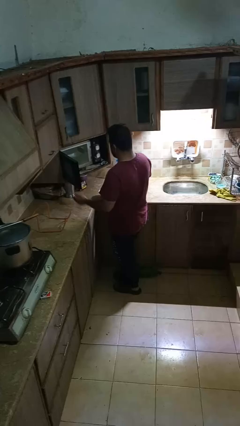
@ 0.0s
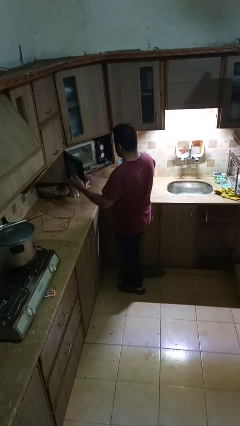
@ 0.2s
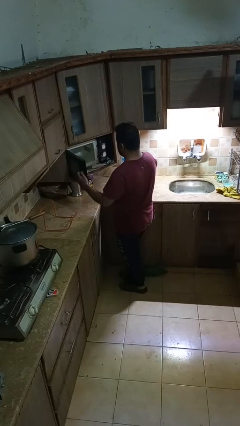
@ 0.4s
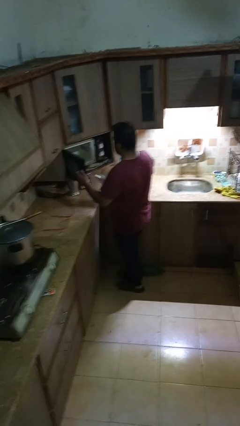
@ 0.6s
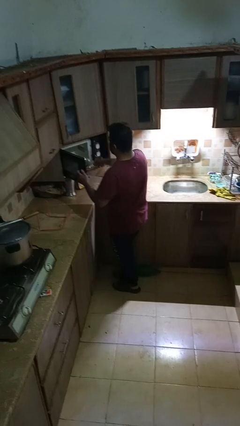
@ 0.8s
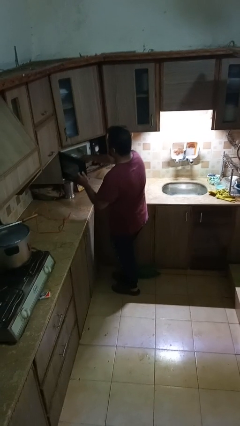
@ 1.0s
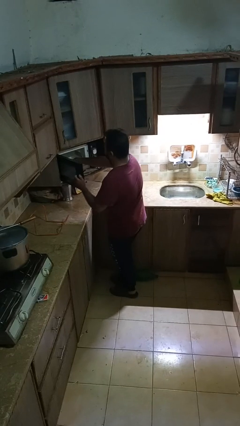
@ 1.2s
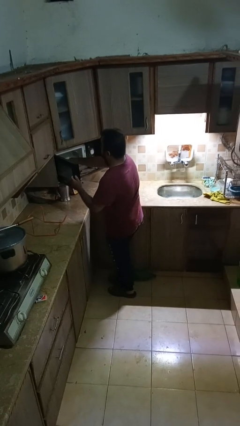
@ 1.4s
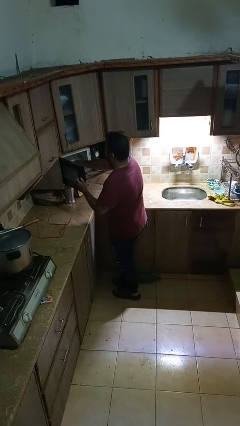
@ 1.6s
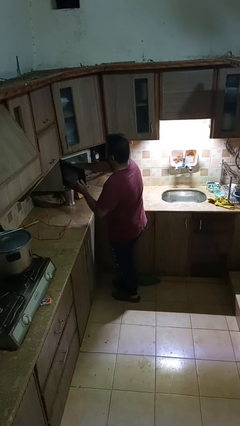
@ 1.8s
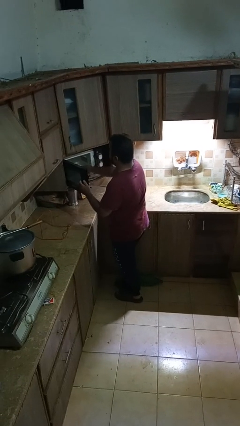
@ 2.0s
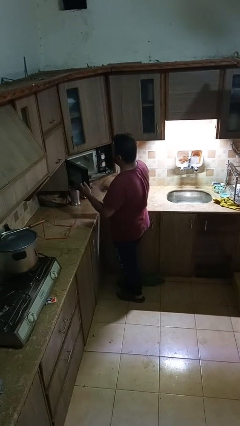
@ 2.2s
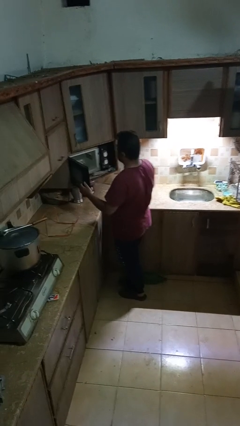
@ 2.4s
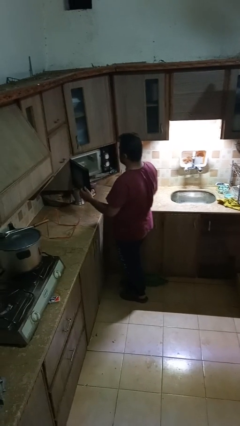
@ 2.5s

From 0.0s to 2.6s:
person puts object into microwave

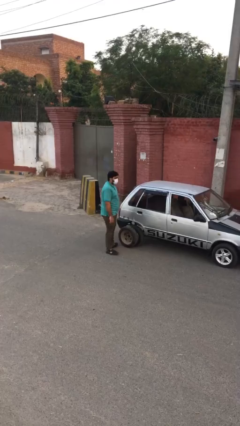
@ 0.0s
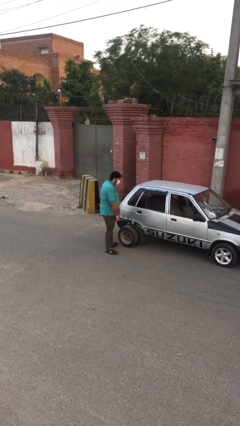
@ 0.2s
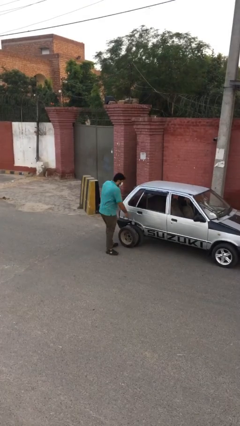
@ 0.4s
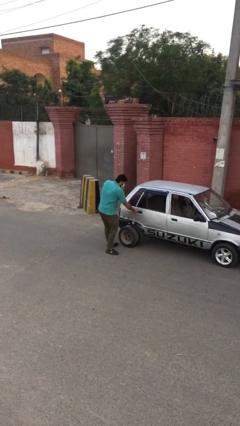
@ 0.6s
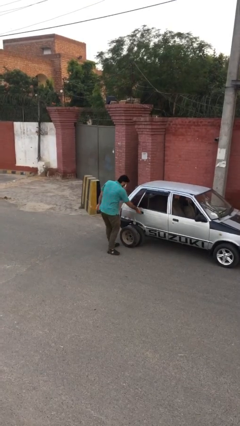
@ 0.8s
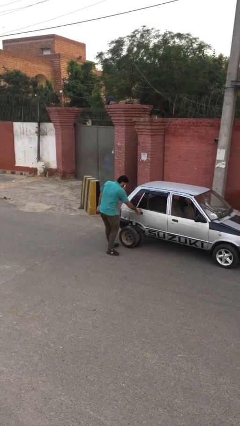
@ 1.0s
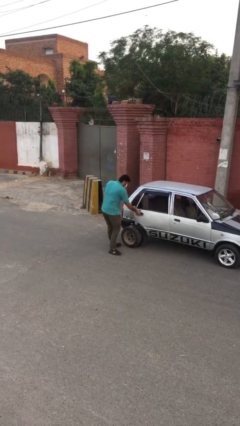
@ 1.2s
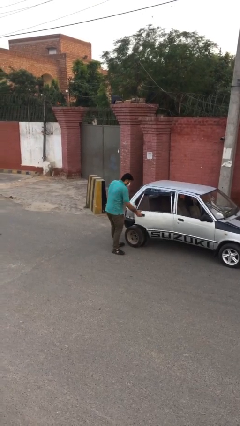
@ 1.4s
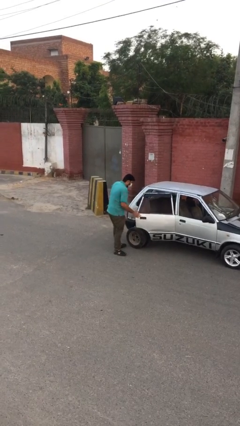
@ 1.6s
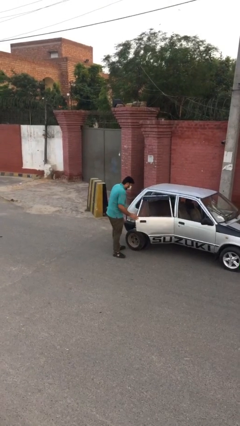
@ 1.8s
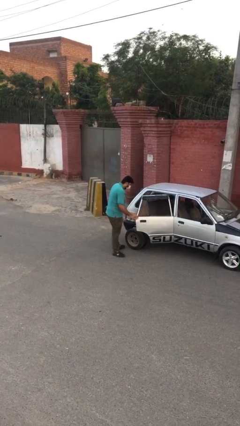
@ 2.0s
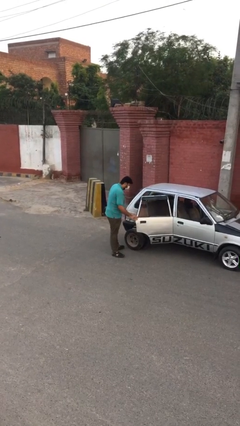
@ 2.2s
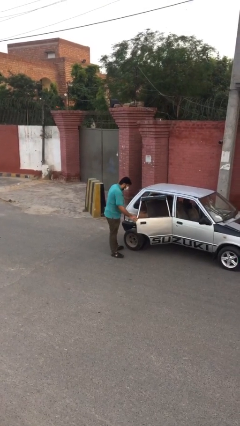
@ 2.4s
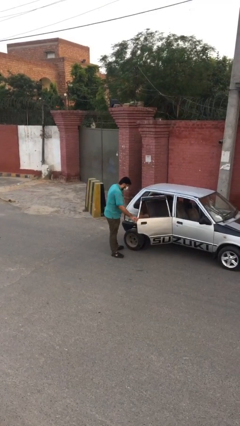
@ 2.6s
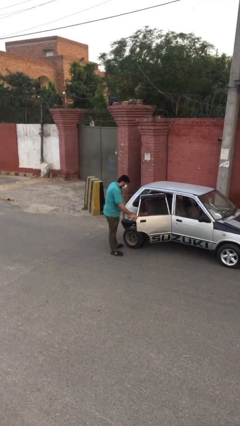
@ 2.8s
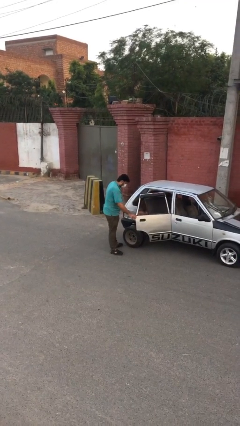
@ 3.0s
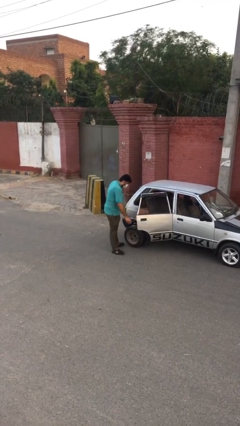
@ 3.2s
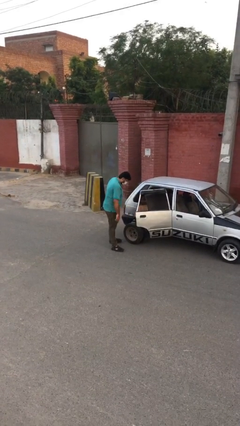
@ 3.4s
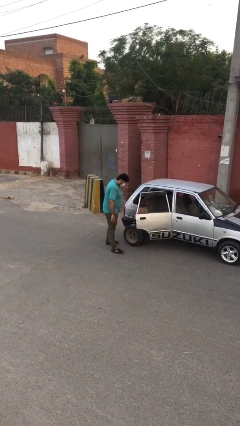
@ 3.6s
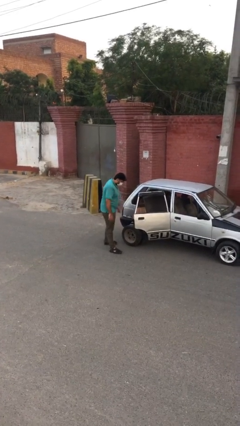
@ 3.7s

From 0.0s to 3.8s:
person opens car door

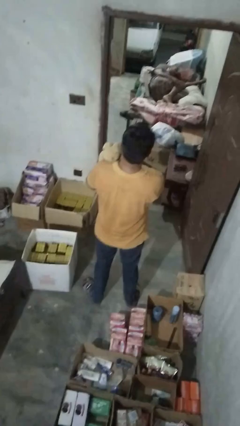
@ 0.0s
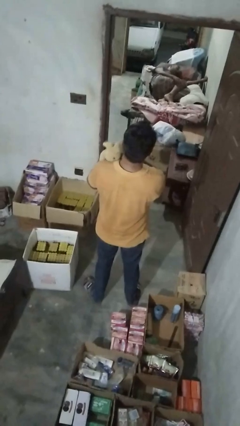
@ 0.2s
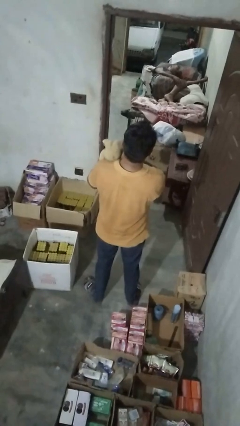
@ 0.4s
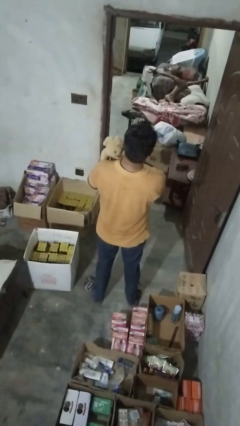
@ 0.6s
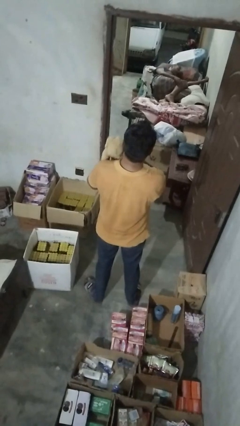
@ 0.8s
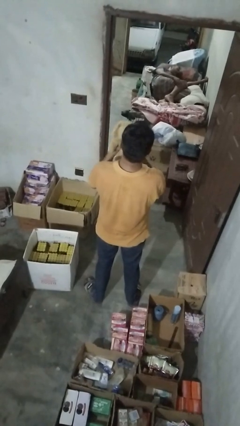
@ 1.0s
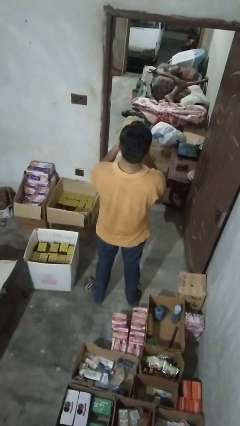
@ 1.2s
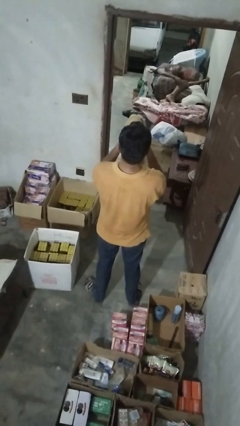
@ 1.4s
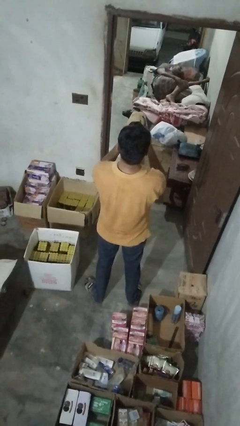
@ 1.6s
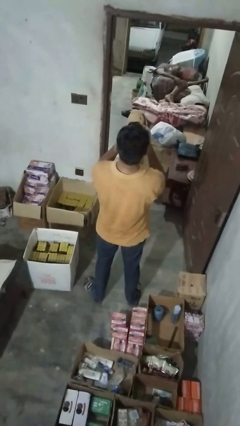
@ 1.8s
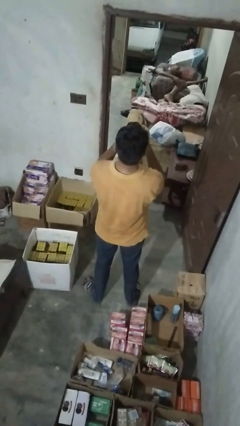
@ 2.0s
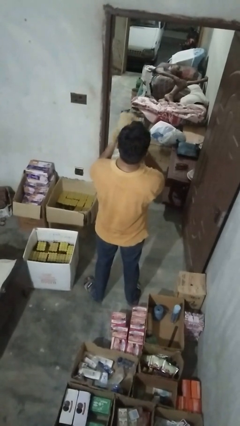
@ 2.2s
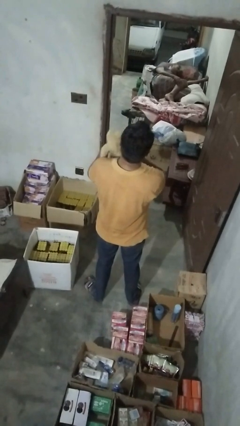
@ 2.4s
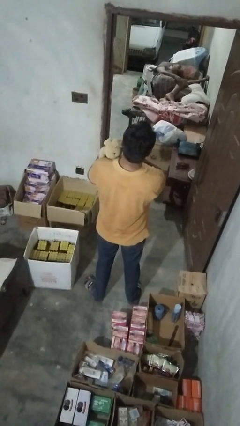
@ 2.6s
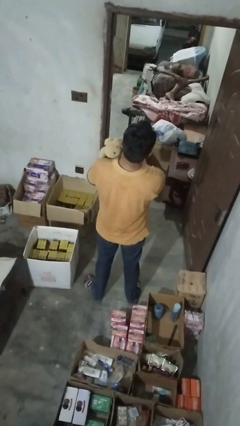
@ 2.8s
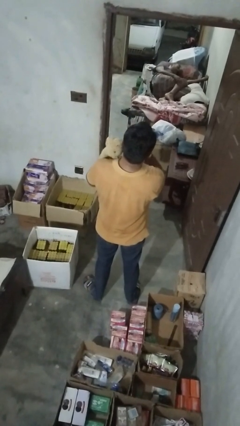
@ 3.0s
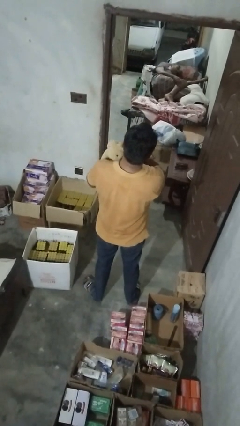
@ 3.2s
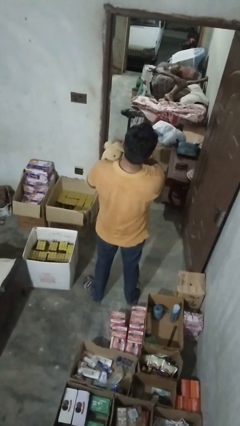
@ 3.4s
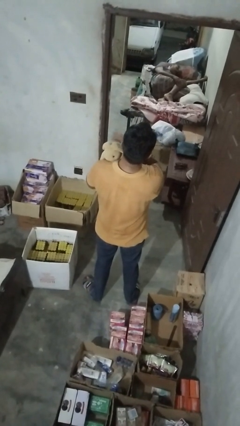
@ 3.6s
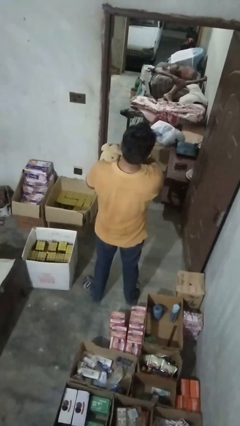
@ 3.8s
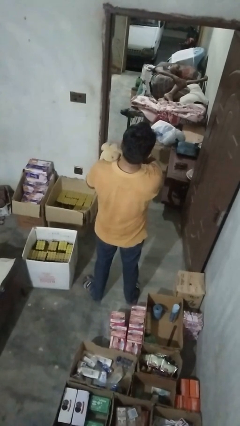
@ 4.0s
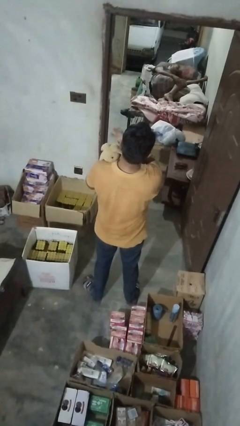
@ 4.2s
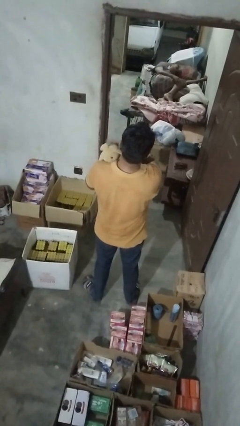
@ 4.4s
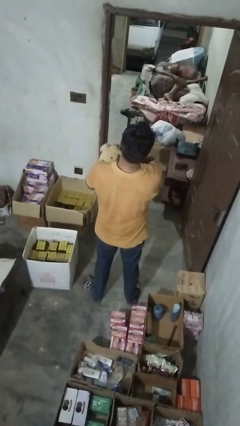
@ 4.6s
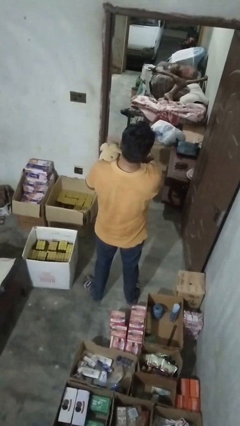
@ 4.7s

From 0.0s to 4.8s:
person hugs stuffed animal

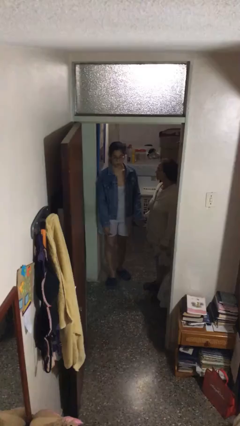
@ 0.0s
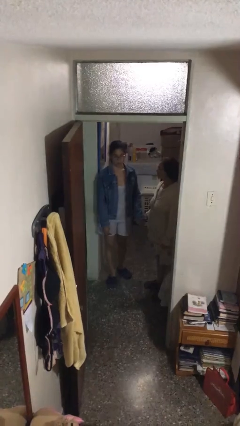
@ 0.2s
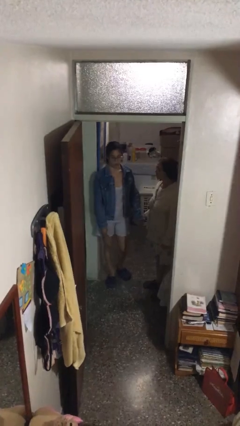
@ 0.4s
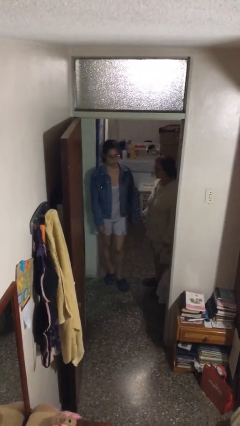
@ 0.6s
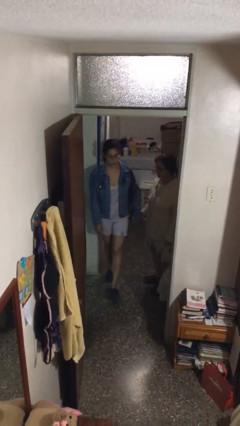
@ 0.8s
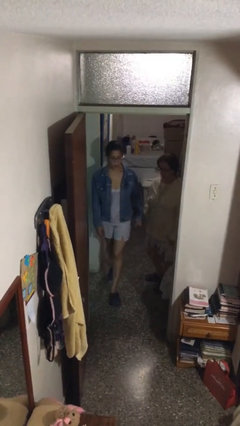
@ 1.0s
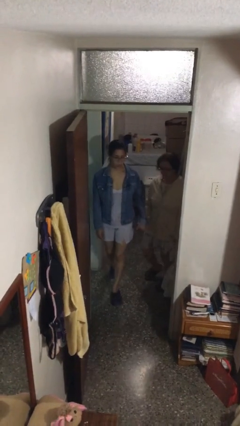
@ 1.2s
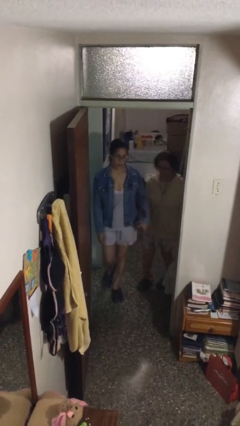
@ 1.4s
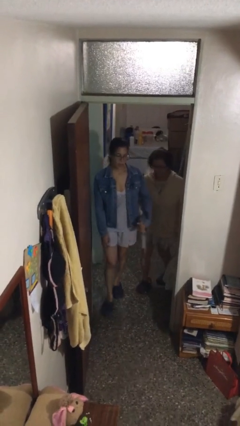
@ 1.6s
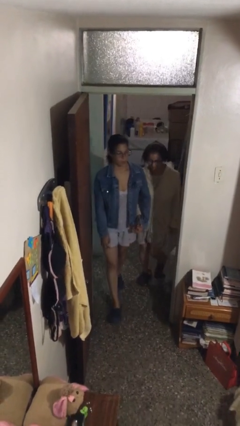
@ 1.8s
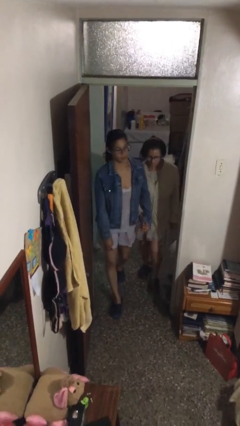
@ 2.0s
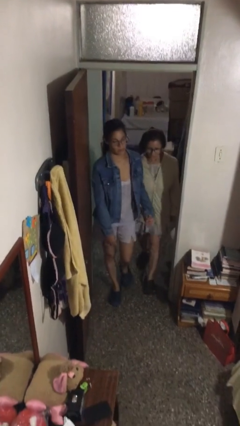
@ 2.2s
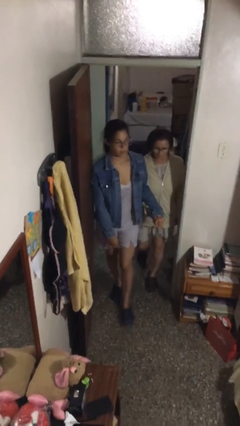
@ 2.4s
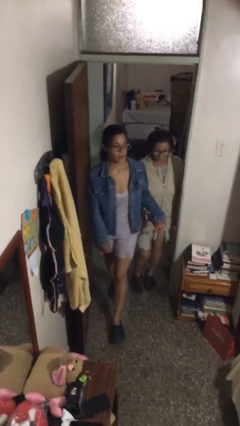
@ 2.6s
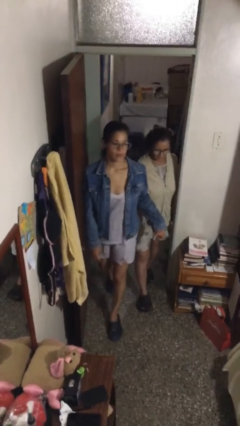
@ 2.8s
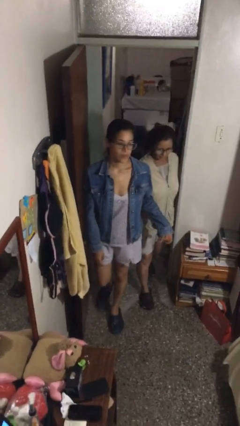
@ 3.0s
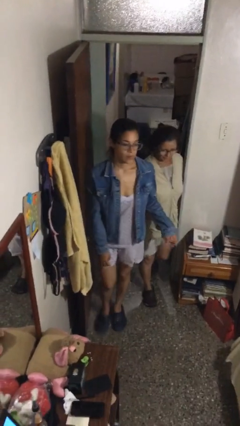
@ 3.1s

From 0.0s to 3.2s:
person holds hand

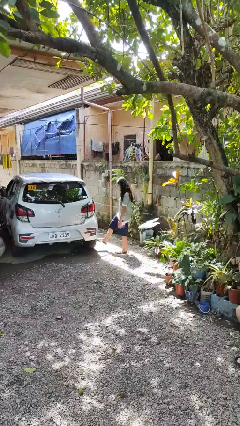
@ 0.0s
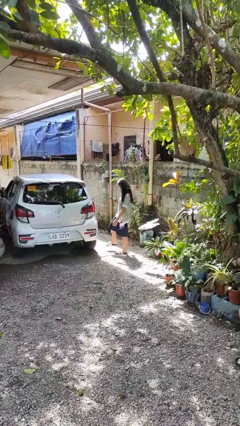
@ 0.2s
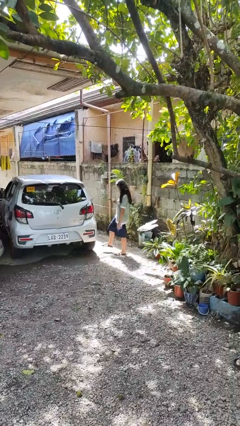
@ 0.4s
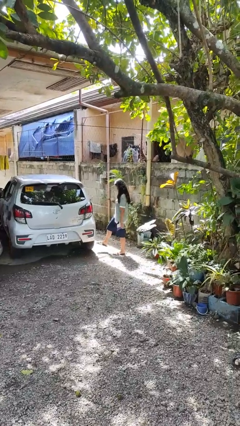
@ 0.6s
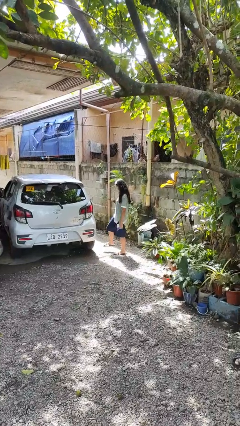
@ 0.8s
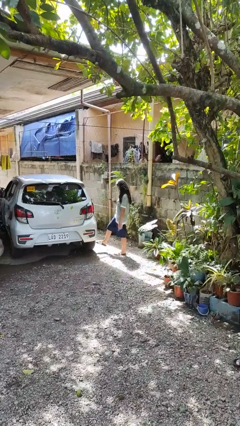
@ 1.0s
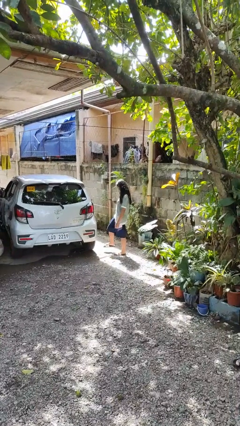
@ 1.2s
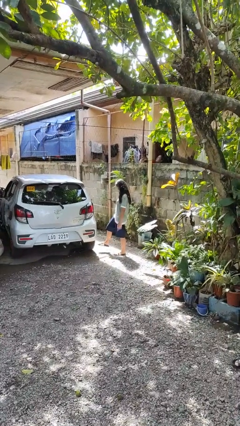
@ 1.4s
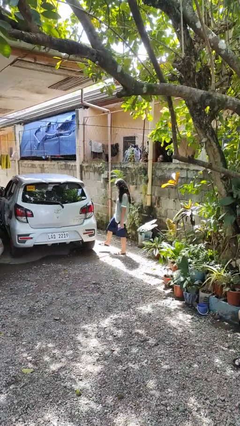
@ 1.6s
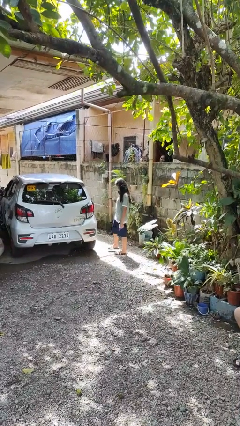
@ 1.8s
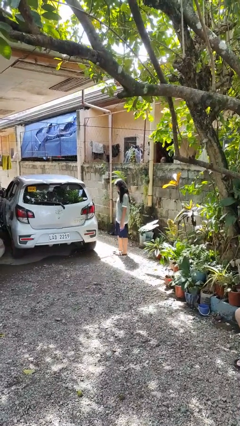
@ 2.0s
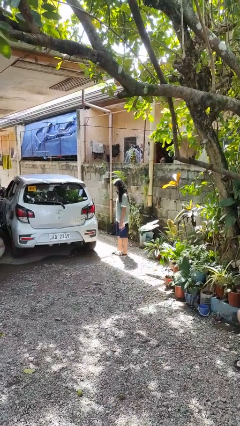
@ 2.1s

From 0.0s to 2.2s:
person kicks car tires

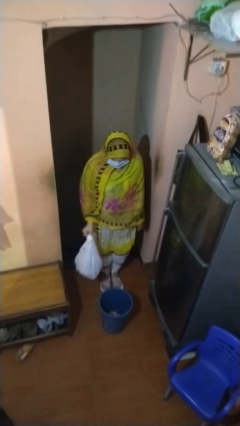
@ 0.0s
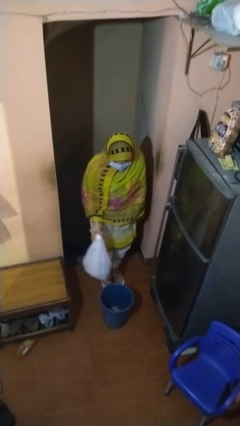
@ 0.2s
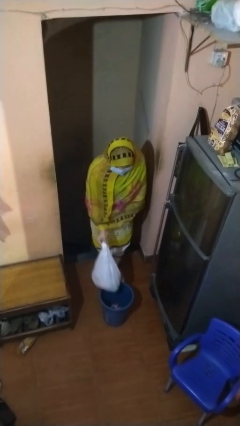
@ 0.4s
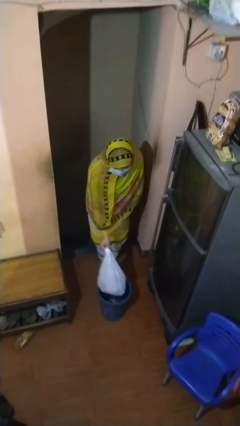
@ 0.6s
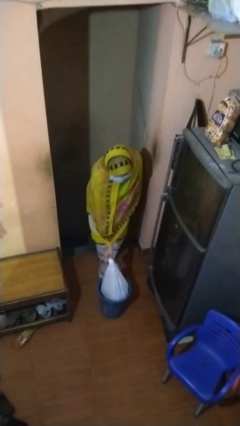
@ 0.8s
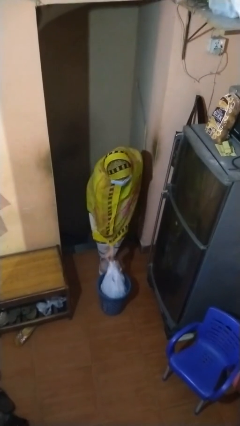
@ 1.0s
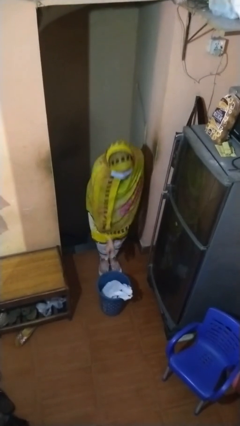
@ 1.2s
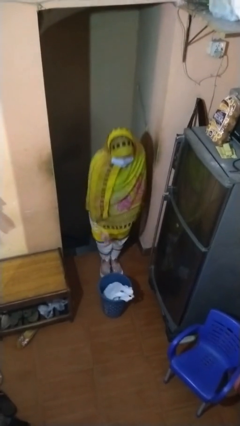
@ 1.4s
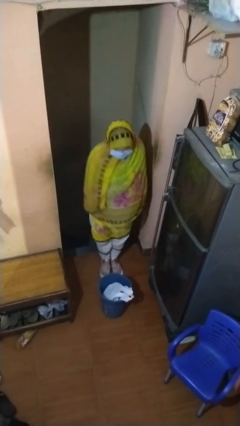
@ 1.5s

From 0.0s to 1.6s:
person inserts trashbag into trashcan
